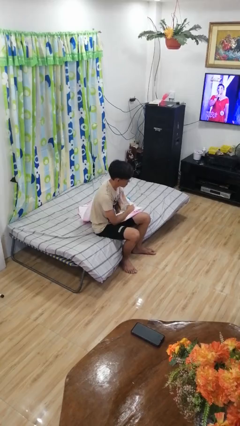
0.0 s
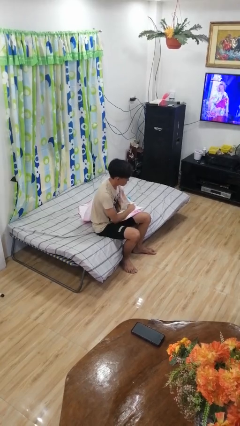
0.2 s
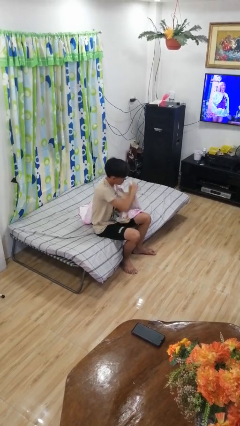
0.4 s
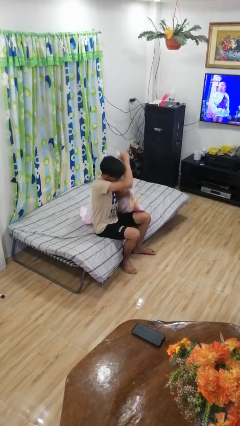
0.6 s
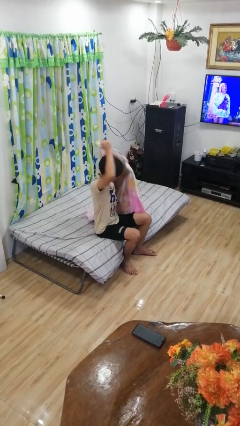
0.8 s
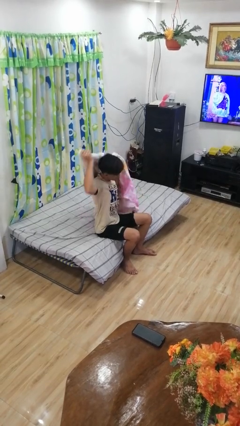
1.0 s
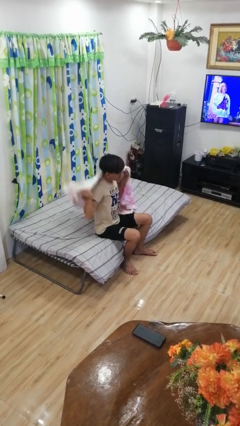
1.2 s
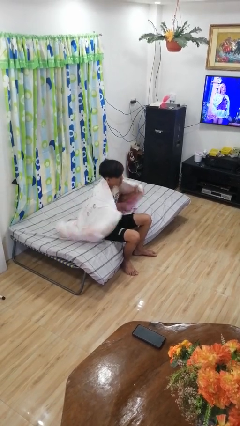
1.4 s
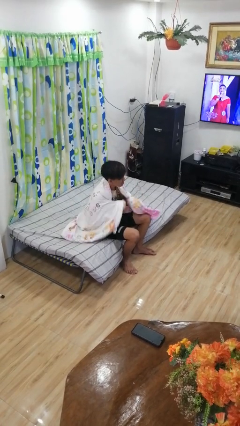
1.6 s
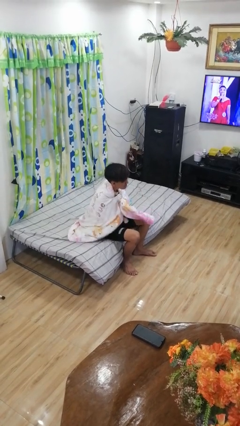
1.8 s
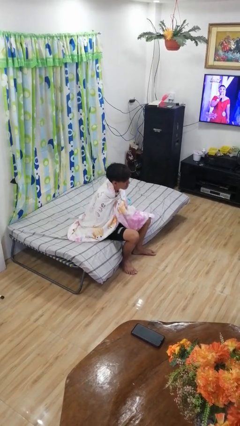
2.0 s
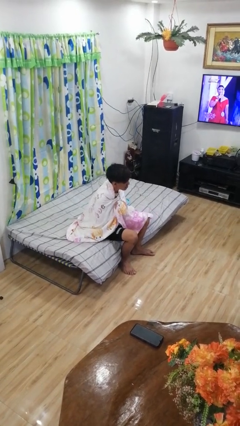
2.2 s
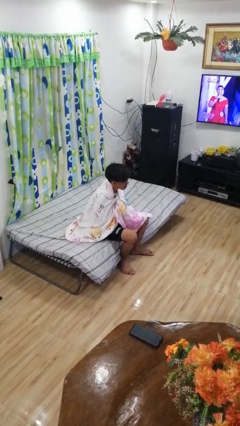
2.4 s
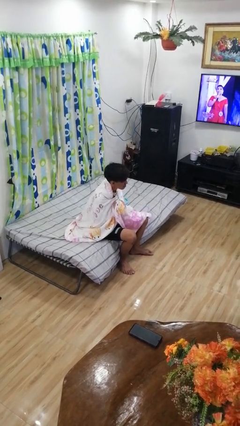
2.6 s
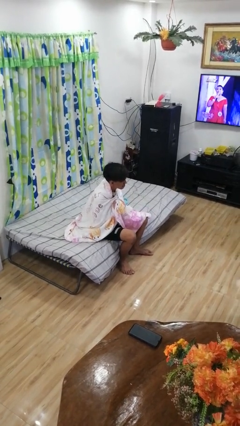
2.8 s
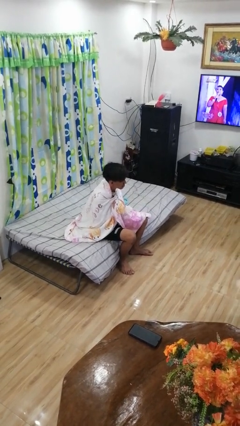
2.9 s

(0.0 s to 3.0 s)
person covers with blanket

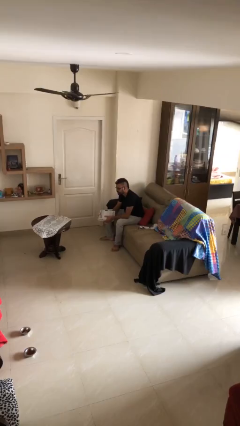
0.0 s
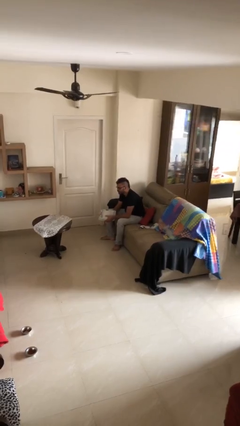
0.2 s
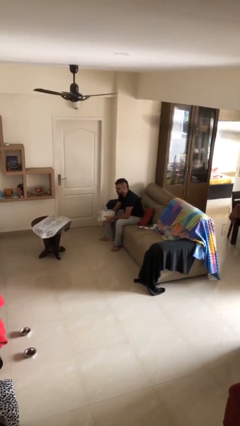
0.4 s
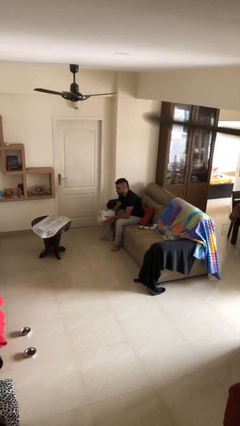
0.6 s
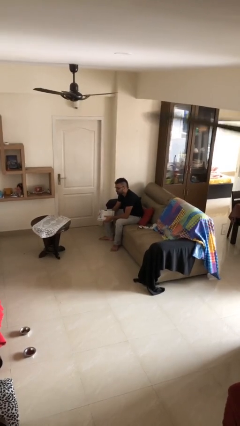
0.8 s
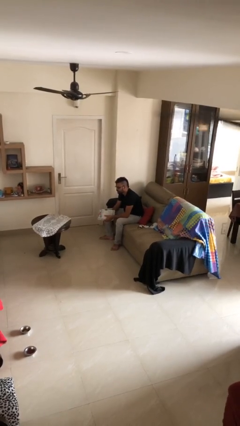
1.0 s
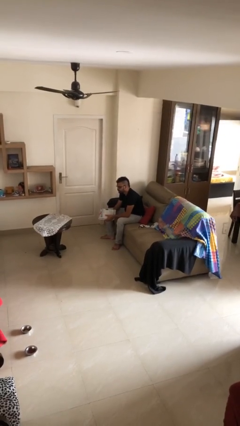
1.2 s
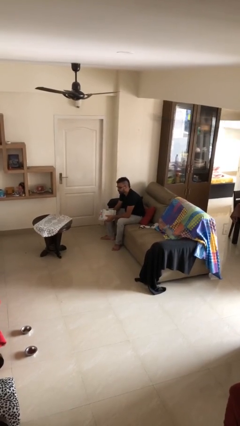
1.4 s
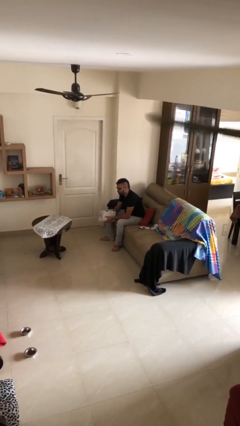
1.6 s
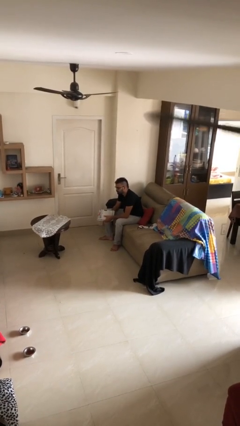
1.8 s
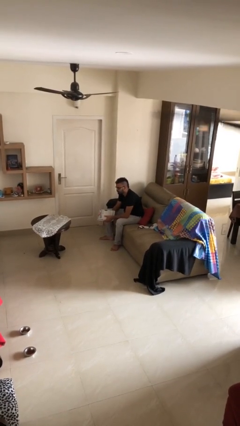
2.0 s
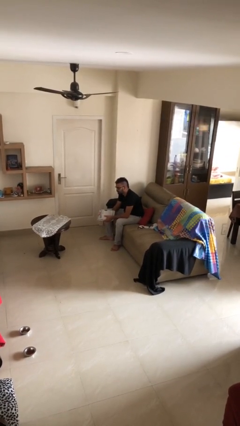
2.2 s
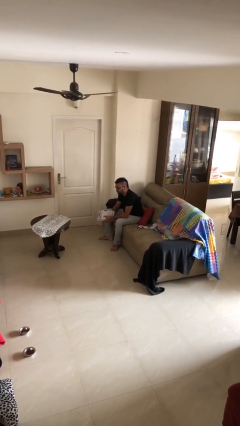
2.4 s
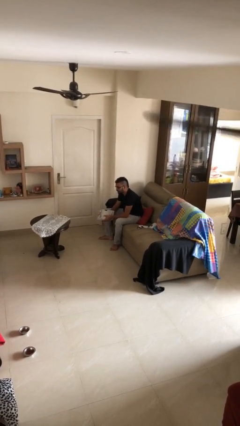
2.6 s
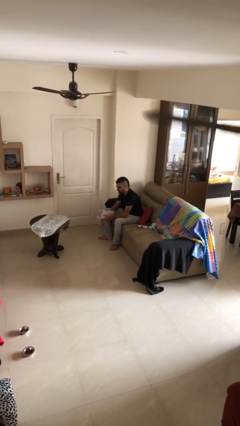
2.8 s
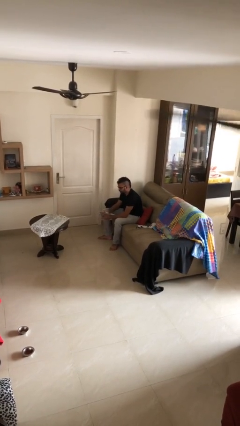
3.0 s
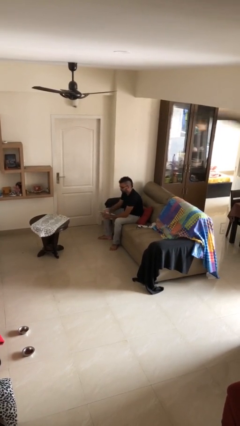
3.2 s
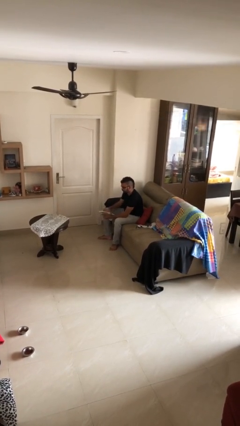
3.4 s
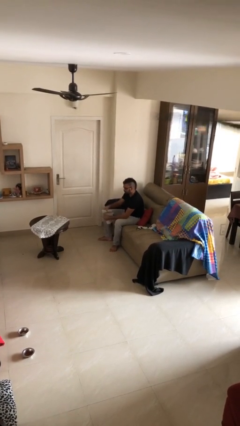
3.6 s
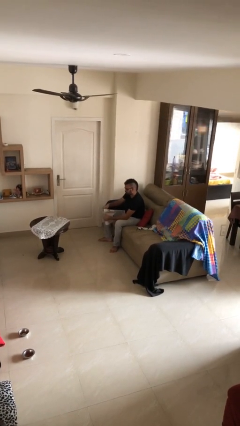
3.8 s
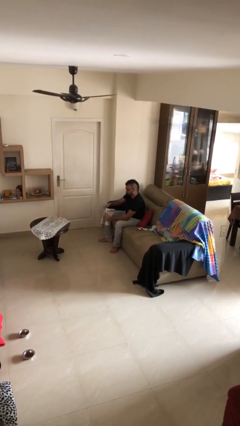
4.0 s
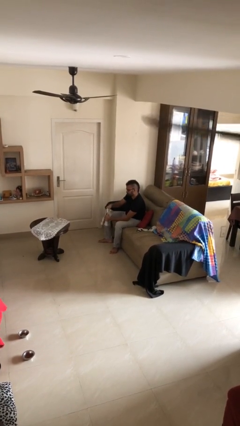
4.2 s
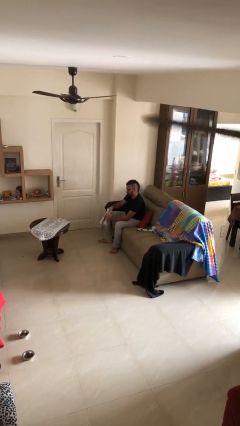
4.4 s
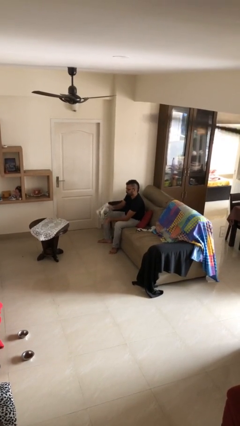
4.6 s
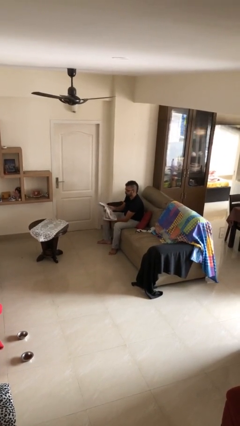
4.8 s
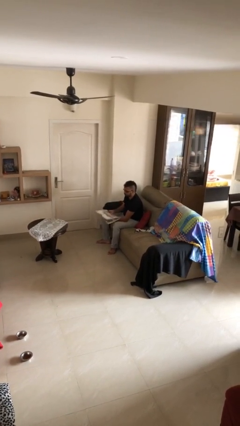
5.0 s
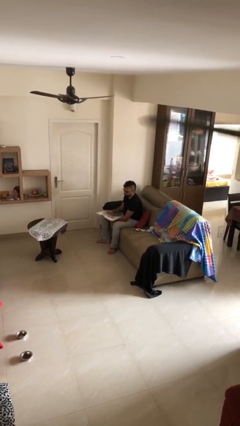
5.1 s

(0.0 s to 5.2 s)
person sits down

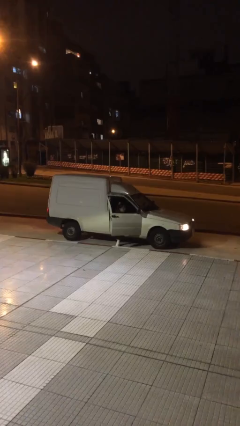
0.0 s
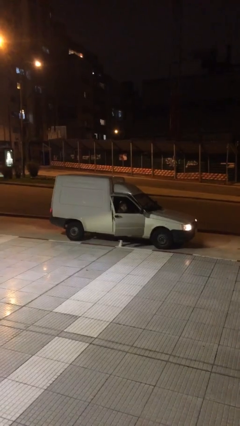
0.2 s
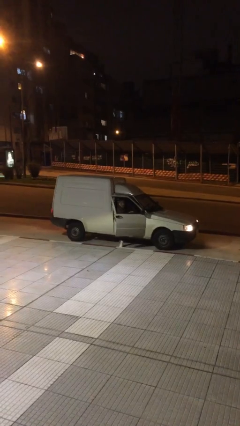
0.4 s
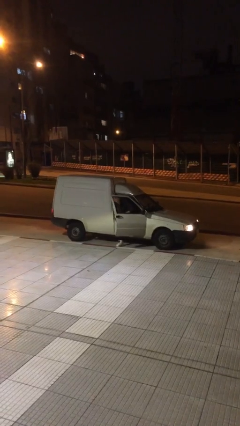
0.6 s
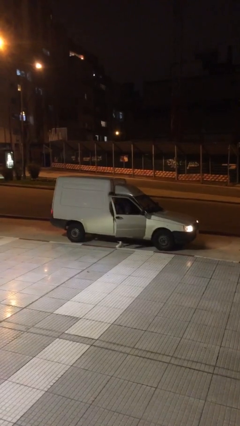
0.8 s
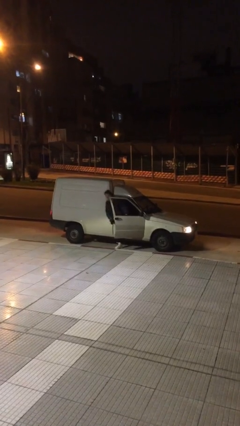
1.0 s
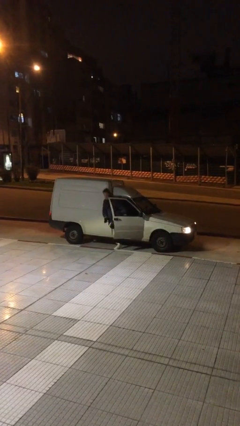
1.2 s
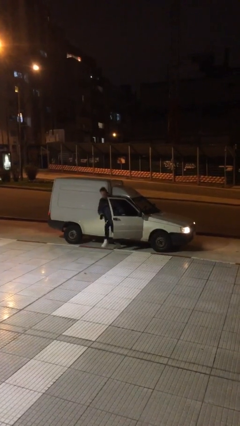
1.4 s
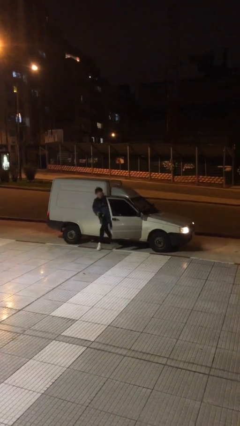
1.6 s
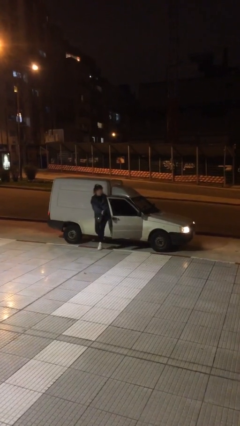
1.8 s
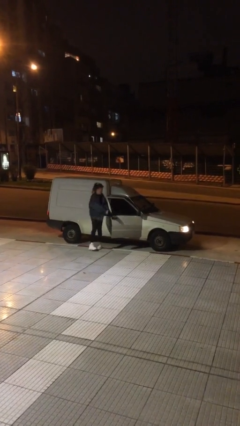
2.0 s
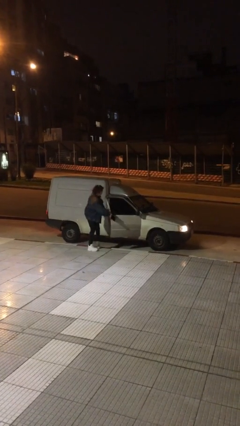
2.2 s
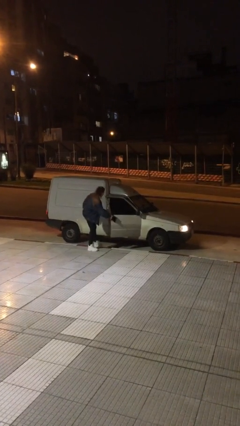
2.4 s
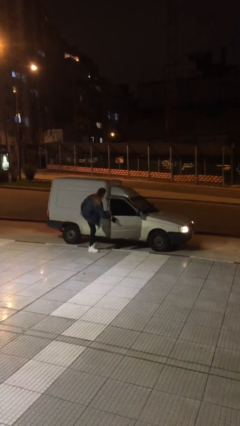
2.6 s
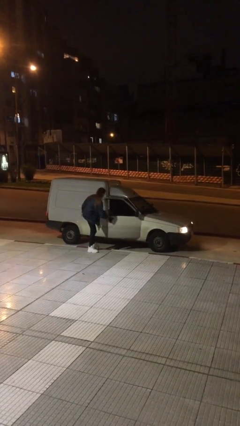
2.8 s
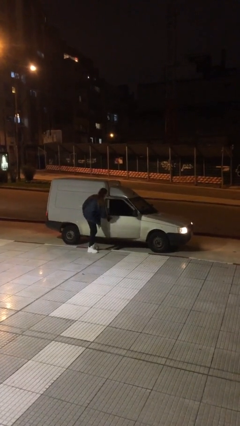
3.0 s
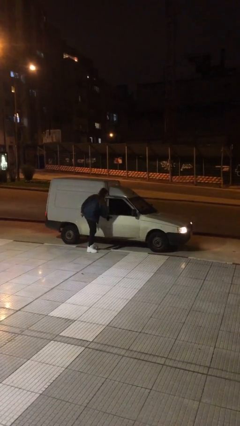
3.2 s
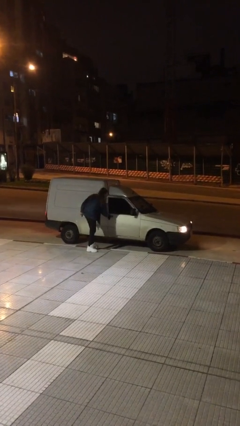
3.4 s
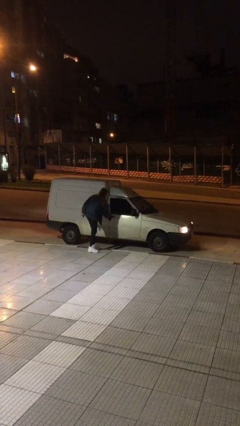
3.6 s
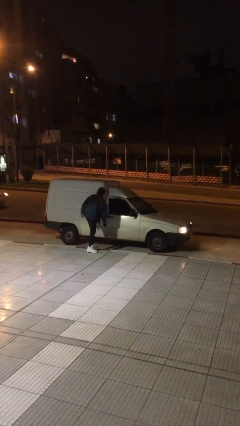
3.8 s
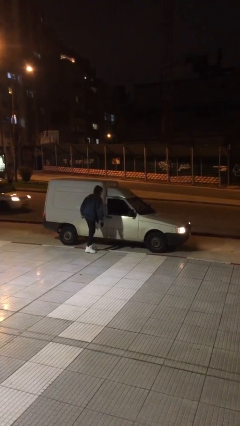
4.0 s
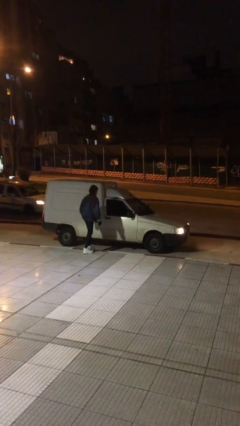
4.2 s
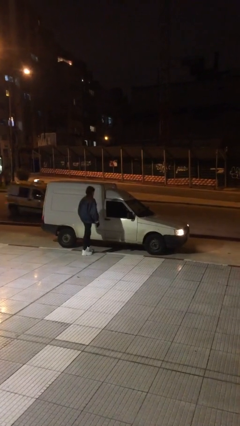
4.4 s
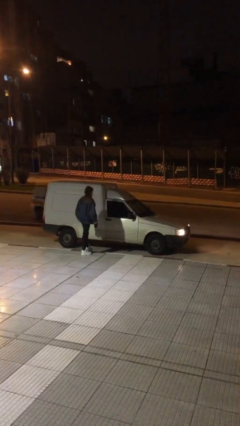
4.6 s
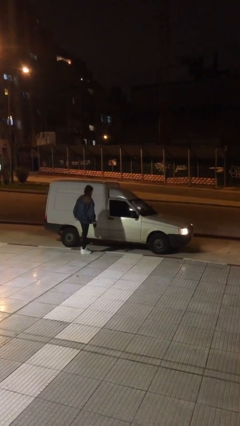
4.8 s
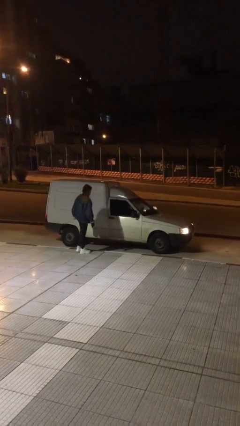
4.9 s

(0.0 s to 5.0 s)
car drops off person

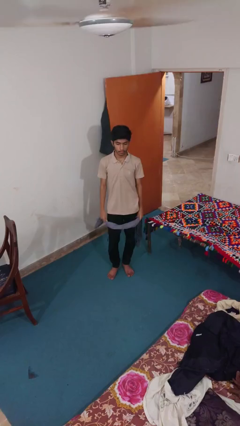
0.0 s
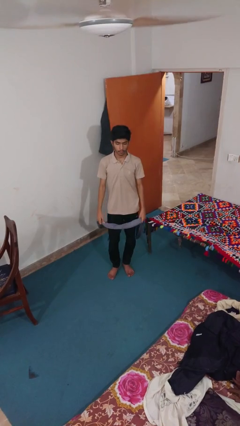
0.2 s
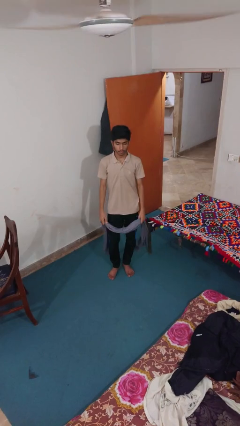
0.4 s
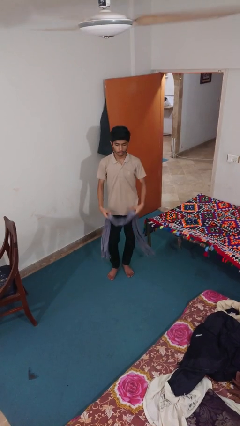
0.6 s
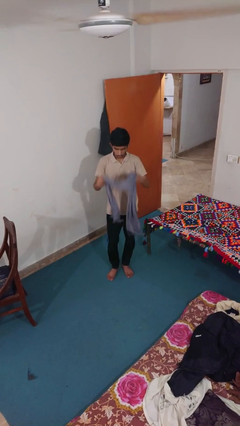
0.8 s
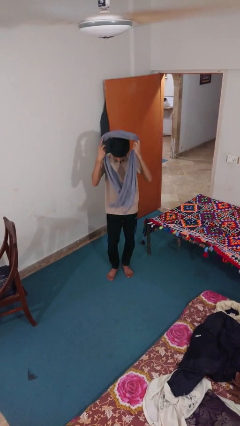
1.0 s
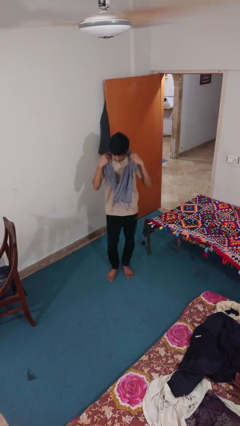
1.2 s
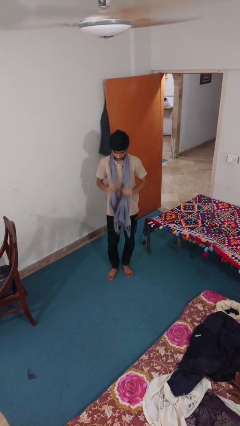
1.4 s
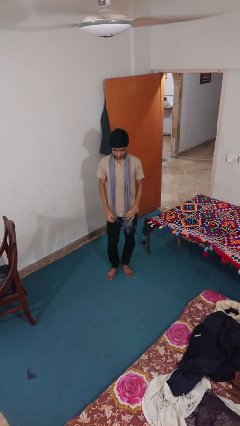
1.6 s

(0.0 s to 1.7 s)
person puts on scarf

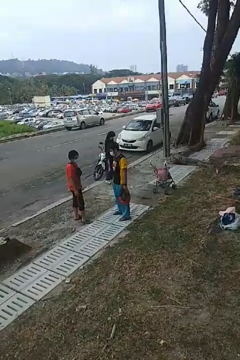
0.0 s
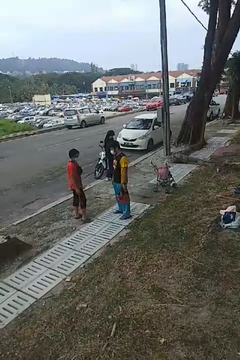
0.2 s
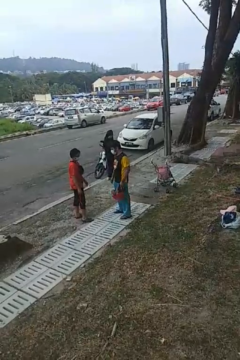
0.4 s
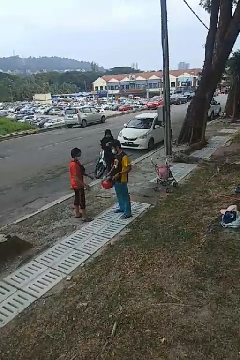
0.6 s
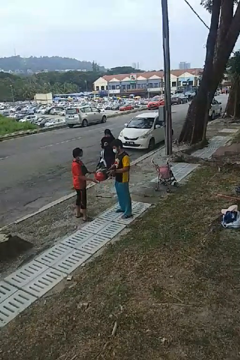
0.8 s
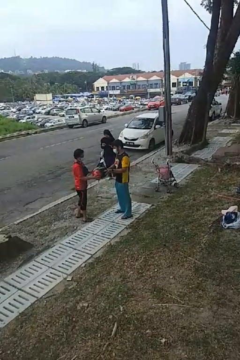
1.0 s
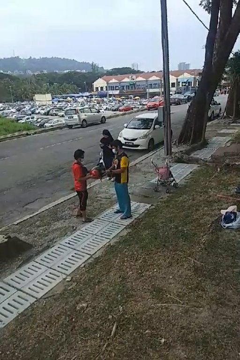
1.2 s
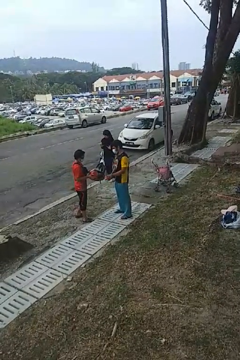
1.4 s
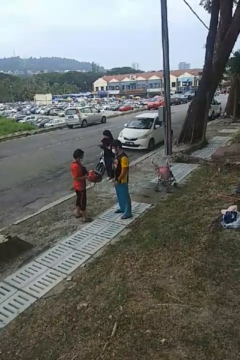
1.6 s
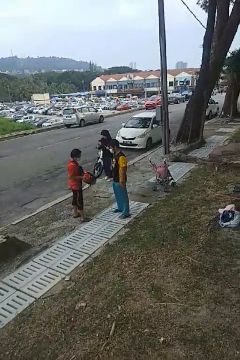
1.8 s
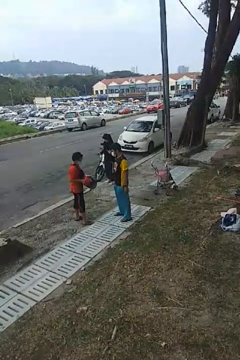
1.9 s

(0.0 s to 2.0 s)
person transfers object to person

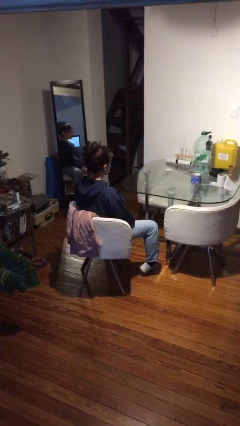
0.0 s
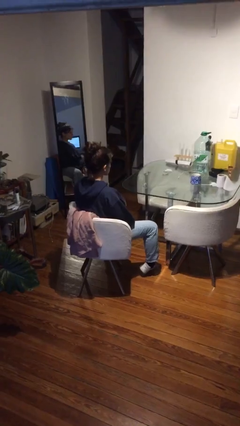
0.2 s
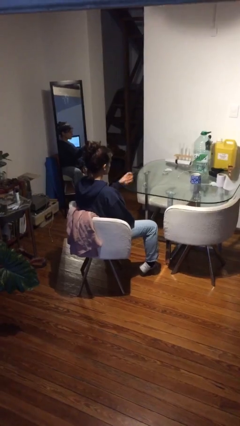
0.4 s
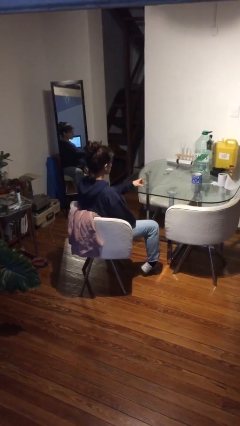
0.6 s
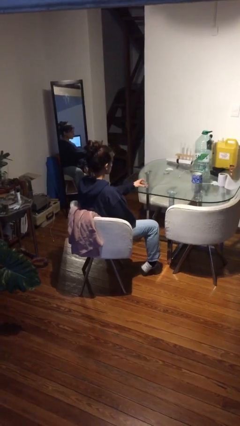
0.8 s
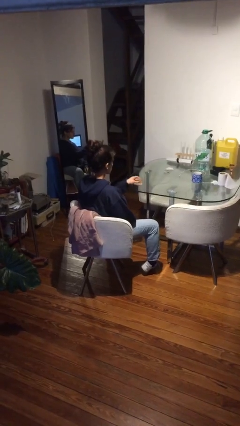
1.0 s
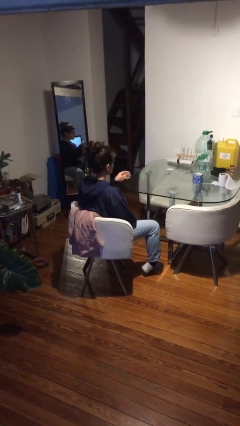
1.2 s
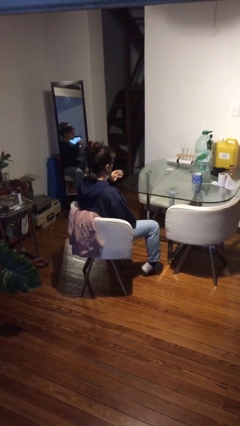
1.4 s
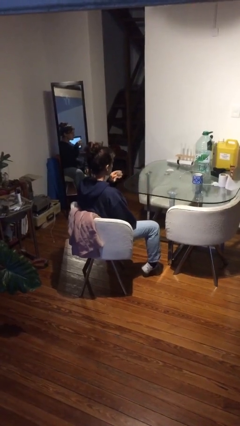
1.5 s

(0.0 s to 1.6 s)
person picks up object from table
